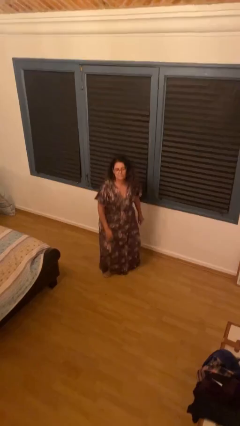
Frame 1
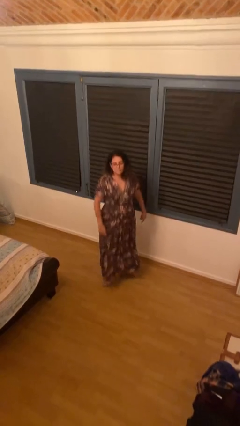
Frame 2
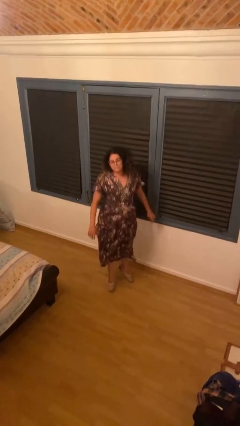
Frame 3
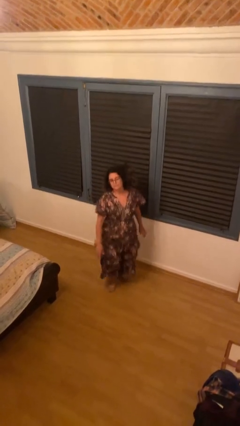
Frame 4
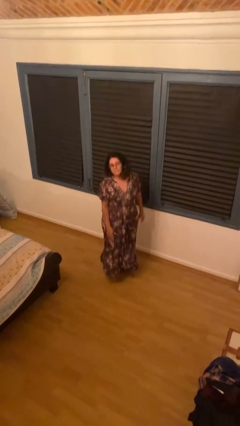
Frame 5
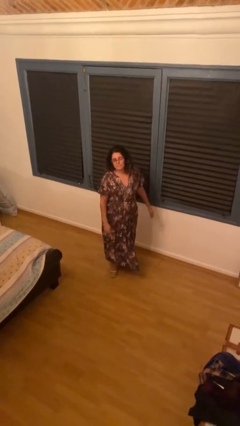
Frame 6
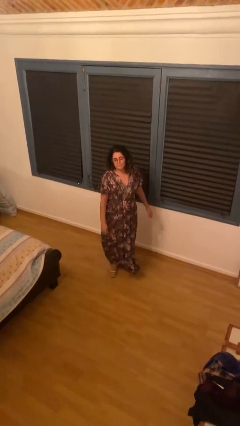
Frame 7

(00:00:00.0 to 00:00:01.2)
person jumps

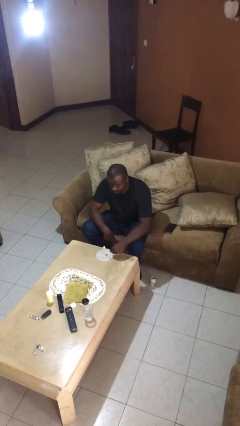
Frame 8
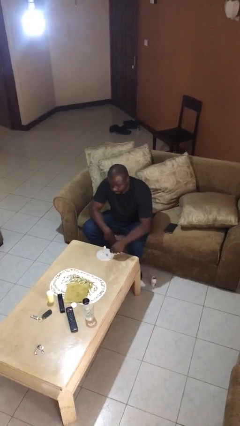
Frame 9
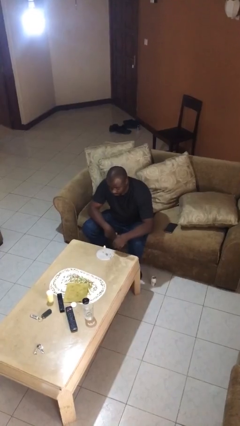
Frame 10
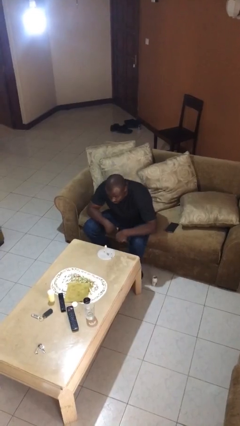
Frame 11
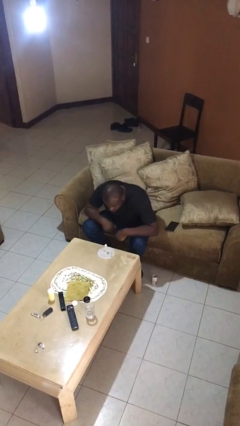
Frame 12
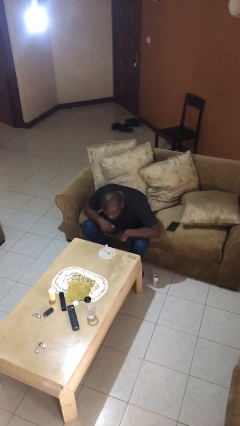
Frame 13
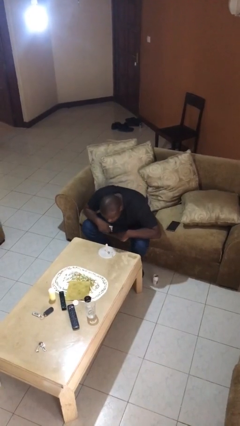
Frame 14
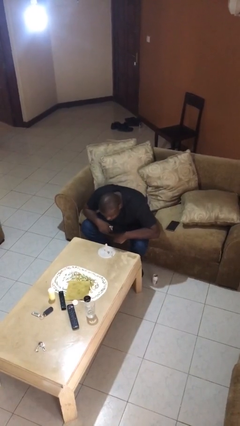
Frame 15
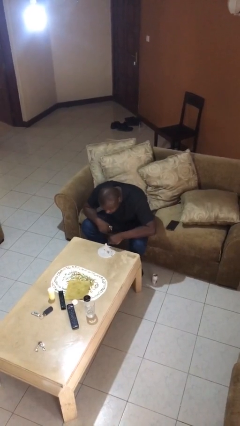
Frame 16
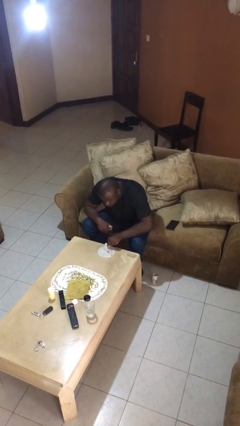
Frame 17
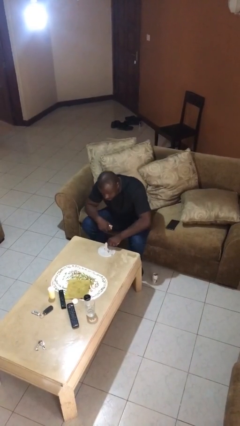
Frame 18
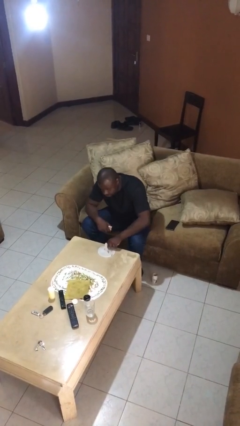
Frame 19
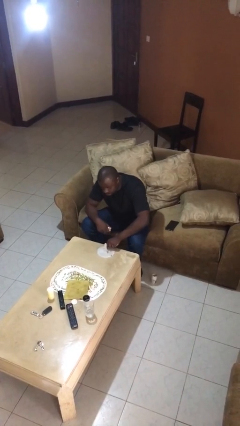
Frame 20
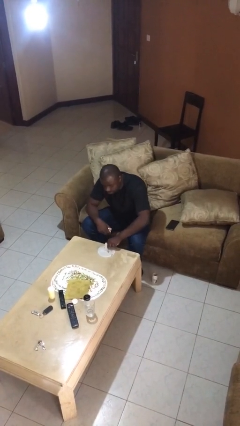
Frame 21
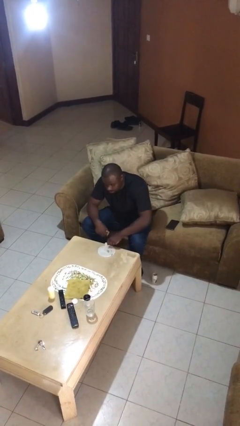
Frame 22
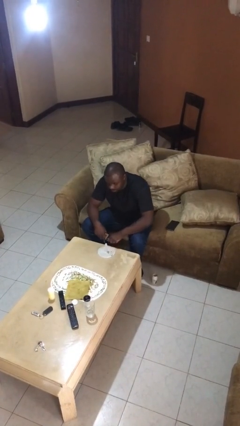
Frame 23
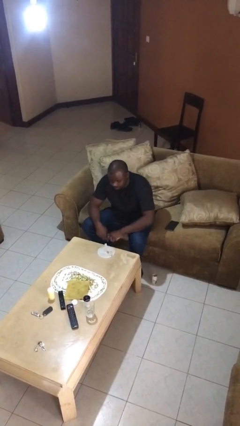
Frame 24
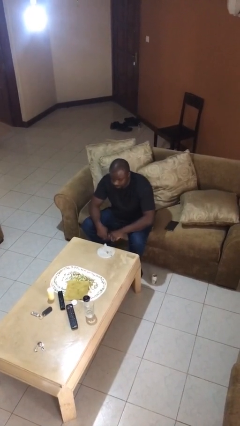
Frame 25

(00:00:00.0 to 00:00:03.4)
person extinguishes candle

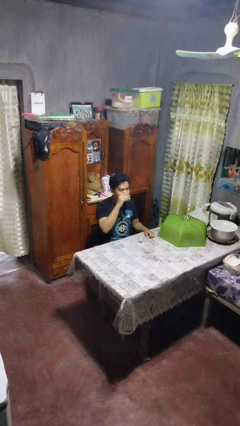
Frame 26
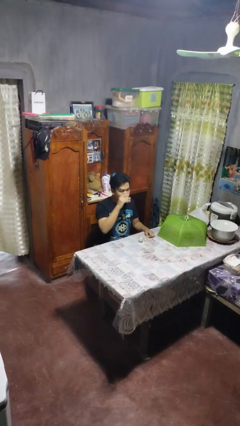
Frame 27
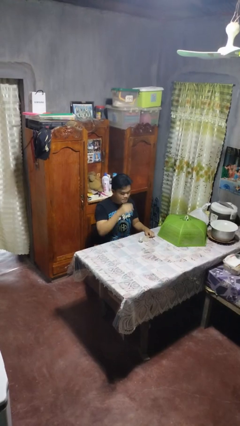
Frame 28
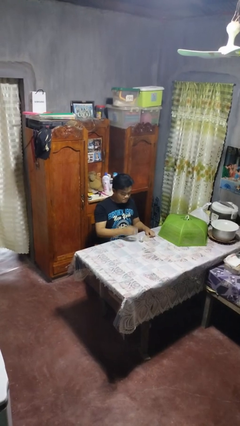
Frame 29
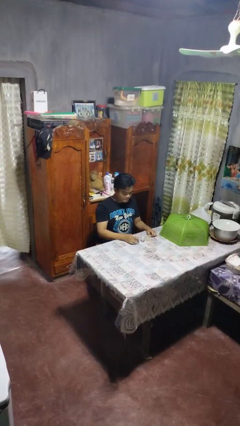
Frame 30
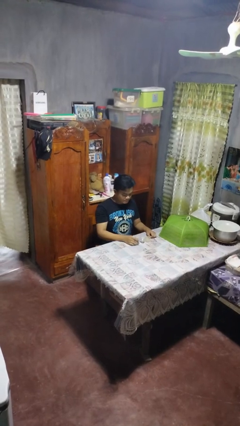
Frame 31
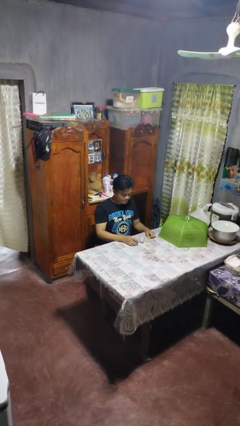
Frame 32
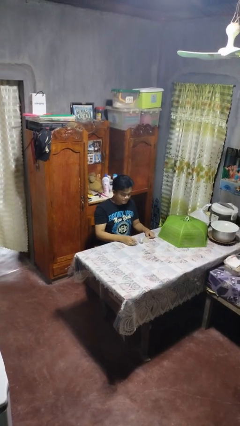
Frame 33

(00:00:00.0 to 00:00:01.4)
person puts down object on table

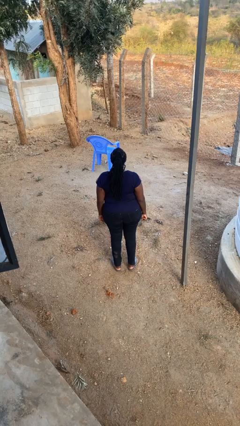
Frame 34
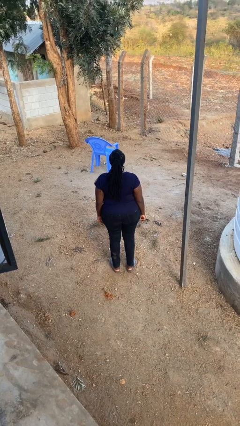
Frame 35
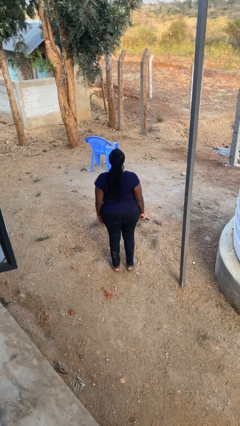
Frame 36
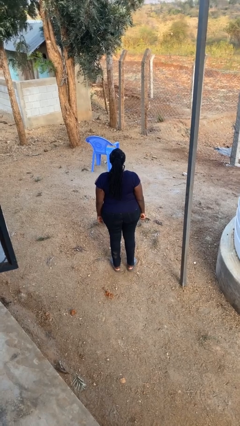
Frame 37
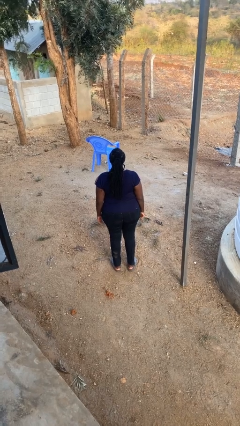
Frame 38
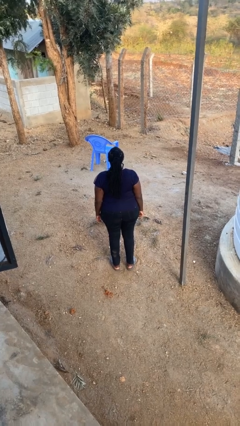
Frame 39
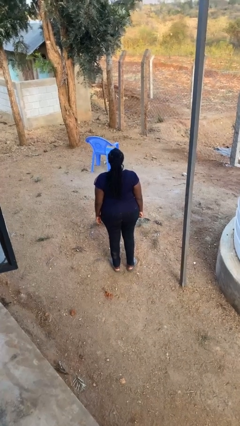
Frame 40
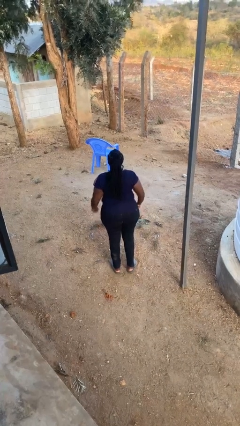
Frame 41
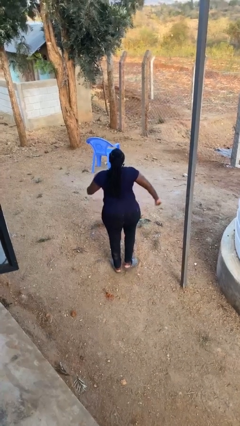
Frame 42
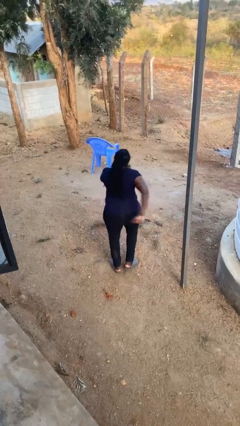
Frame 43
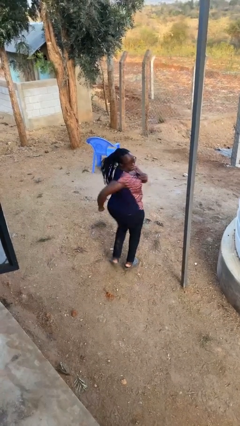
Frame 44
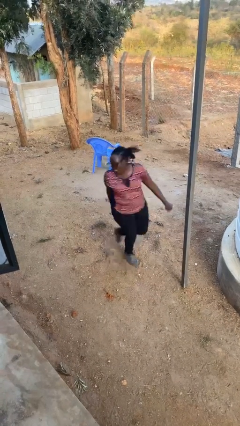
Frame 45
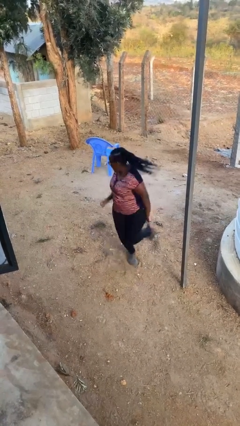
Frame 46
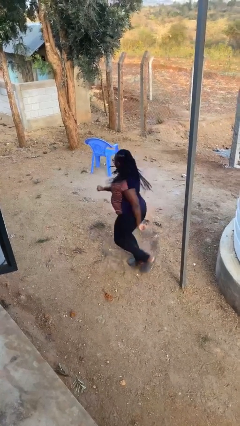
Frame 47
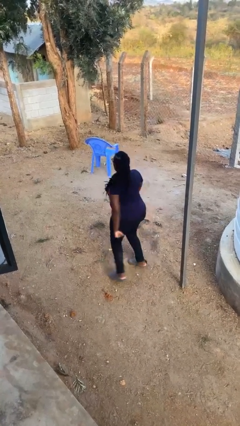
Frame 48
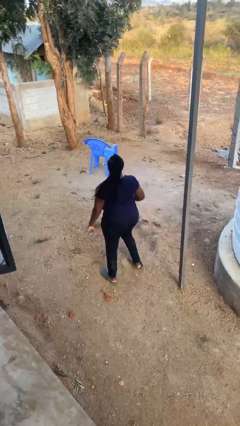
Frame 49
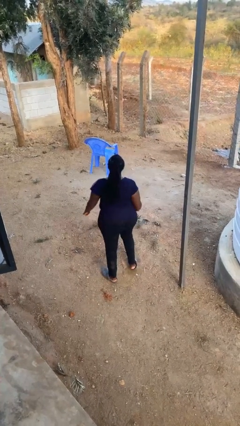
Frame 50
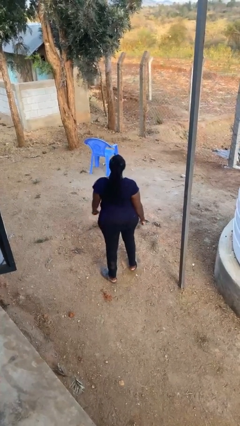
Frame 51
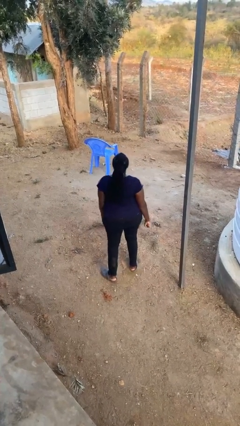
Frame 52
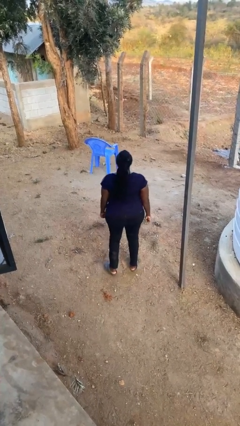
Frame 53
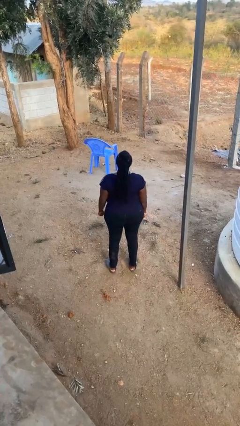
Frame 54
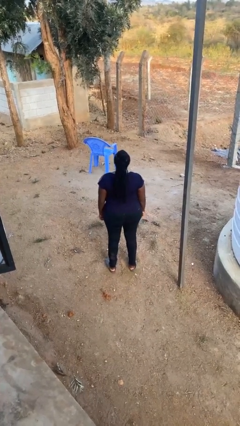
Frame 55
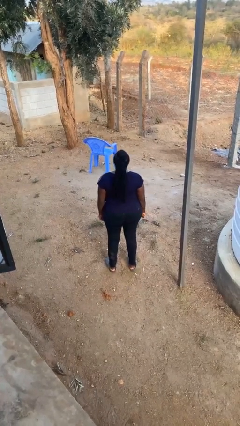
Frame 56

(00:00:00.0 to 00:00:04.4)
person twirls

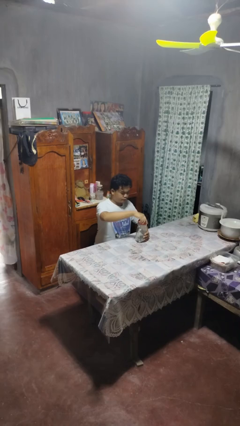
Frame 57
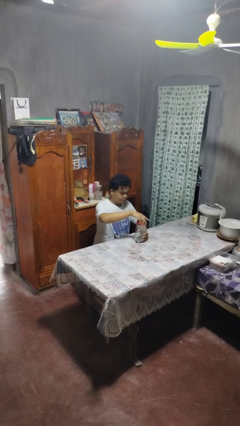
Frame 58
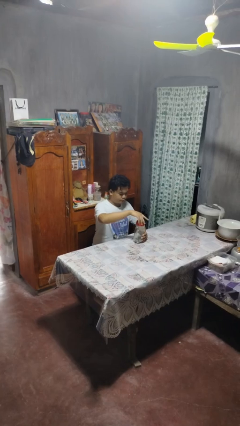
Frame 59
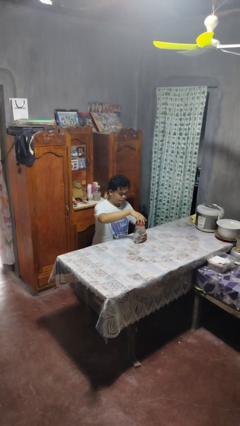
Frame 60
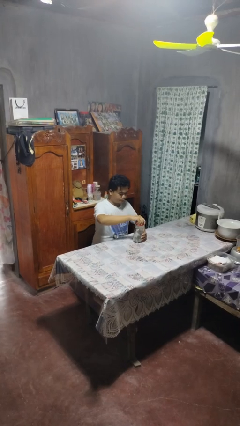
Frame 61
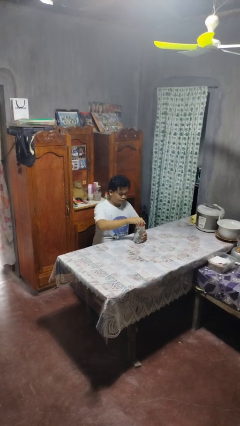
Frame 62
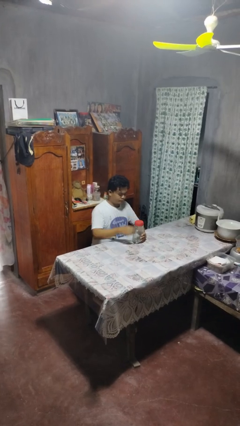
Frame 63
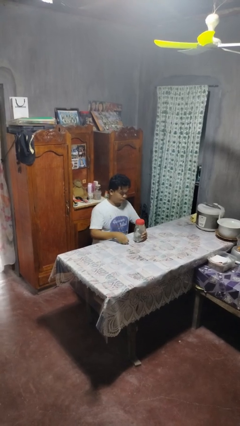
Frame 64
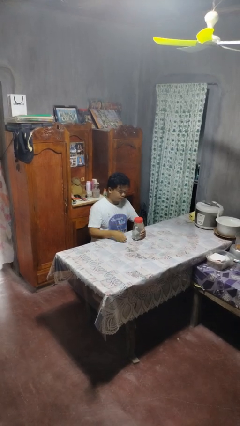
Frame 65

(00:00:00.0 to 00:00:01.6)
person closes jar

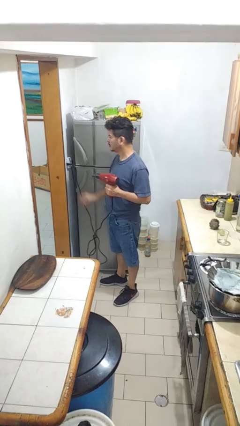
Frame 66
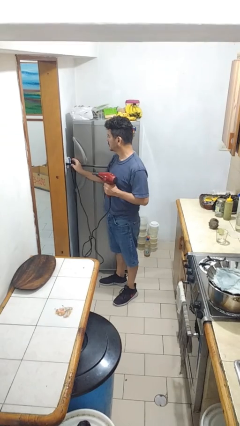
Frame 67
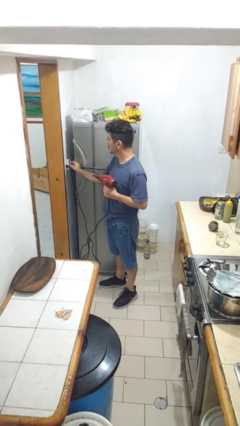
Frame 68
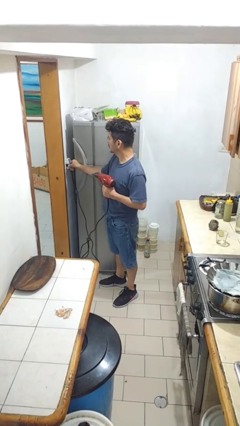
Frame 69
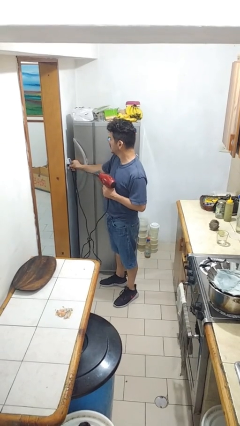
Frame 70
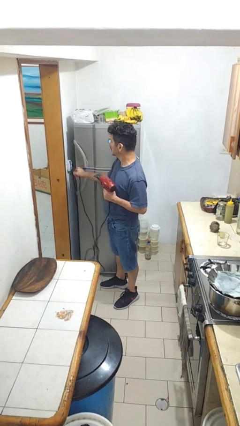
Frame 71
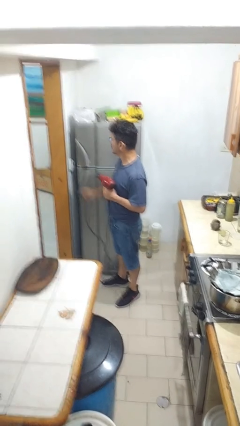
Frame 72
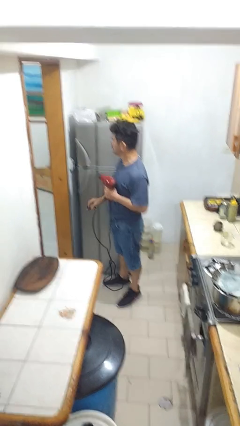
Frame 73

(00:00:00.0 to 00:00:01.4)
person unplugs from electrical socket

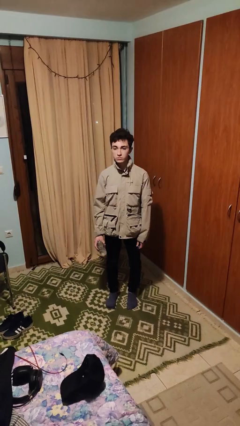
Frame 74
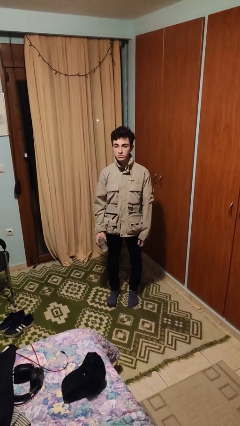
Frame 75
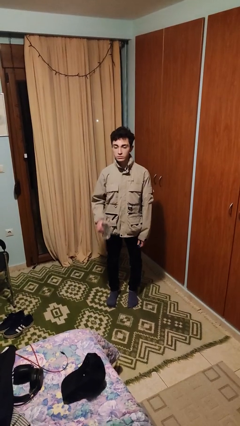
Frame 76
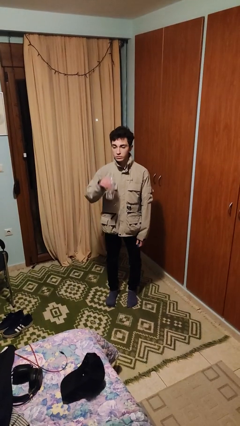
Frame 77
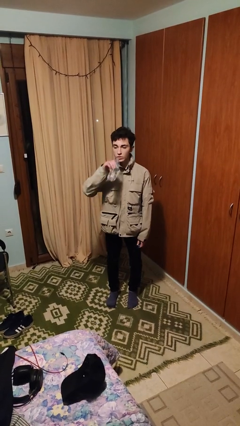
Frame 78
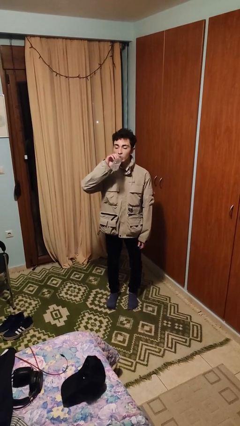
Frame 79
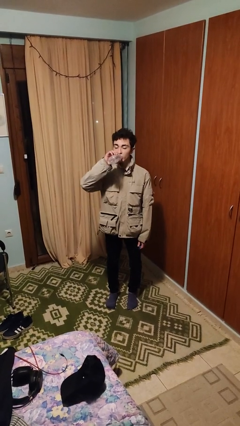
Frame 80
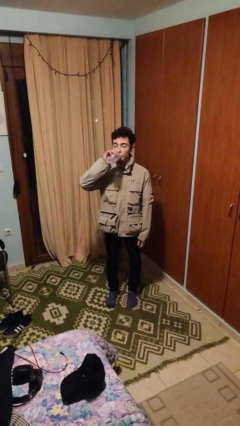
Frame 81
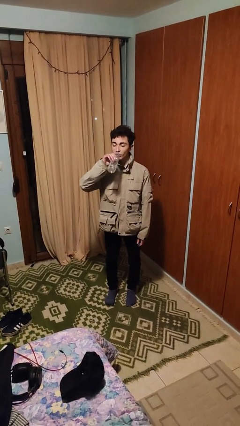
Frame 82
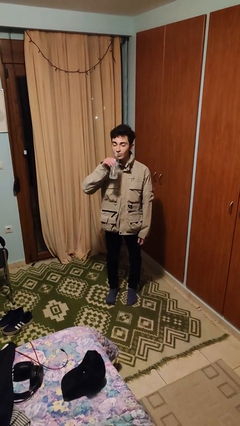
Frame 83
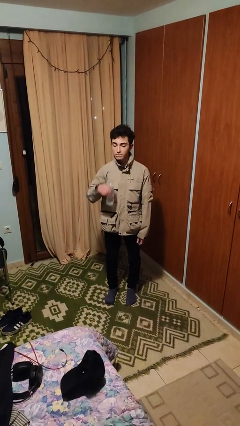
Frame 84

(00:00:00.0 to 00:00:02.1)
person drinks from bottle

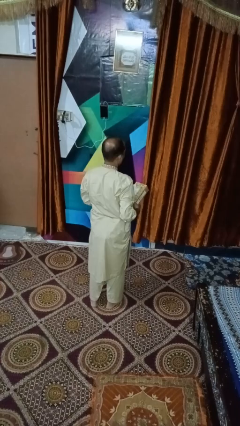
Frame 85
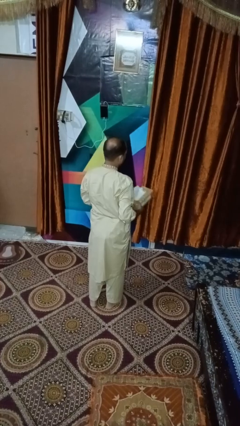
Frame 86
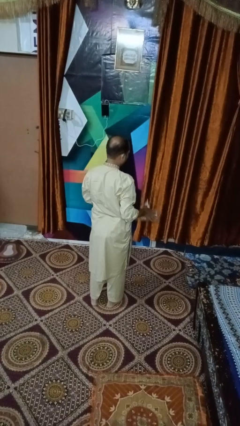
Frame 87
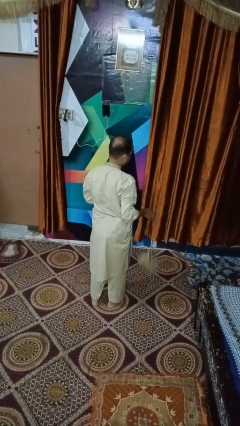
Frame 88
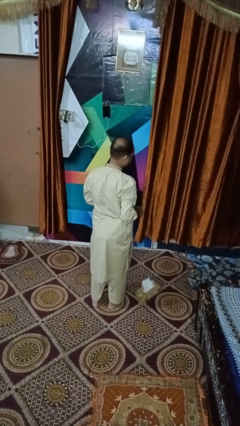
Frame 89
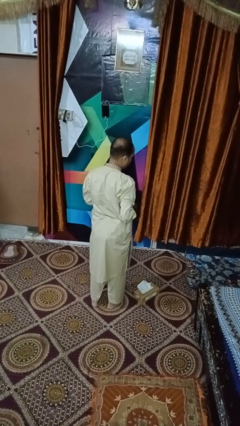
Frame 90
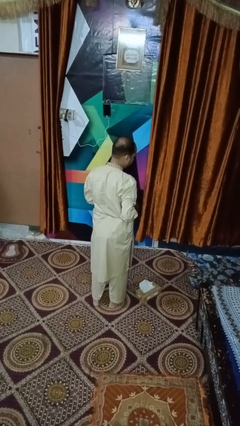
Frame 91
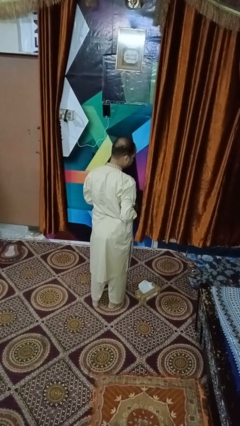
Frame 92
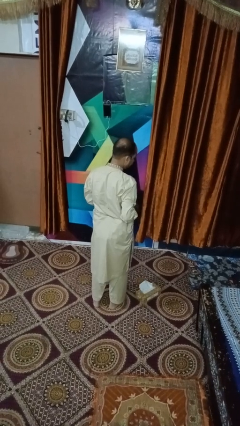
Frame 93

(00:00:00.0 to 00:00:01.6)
person drops object
